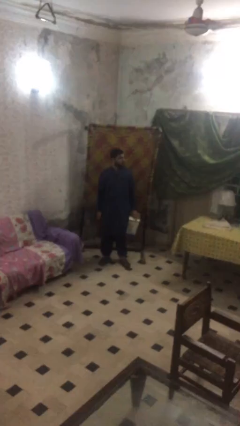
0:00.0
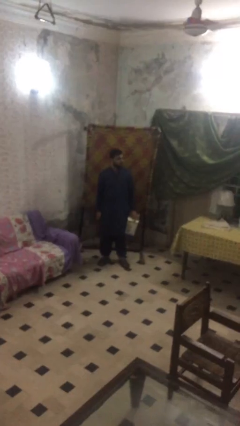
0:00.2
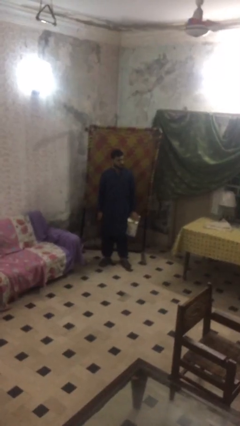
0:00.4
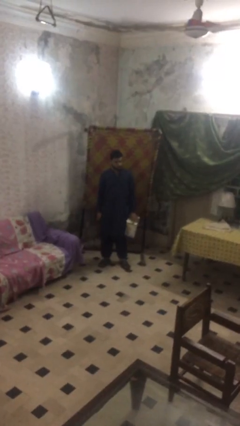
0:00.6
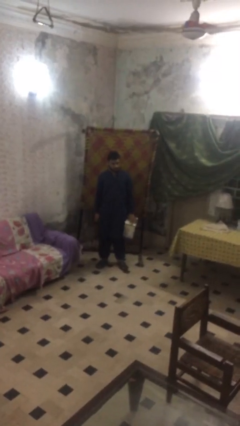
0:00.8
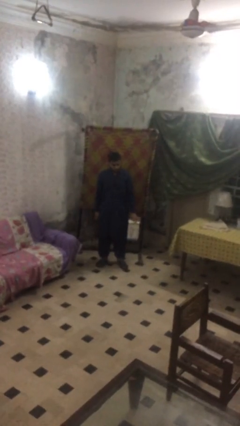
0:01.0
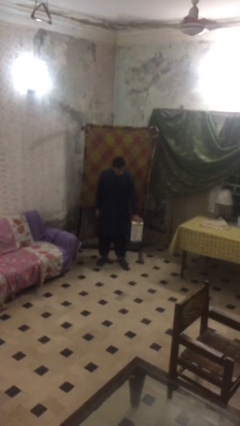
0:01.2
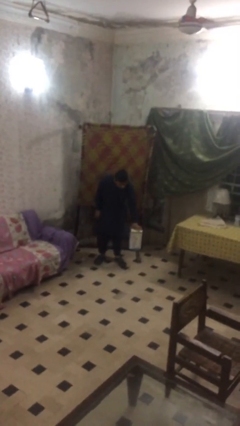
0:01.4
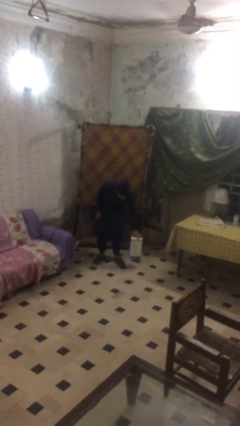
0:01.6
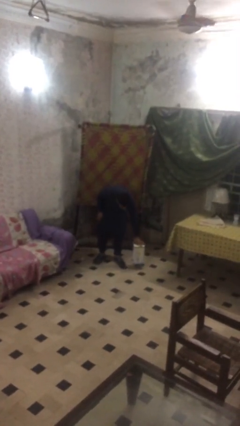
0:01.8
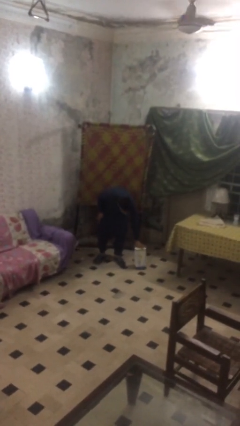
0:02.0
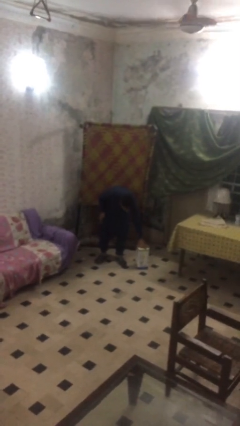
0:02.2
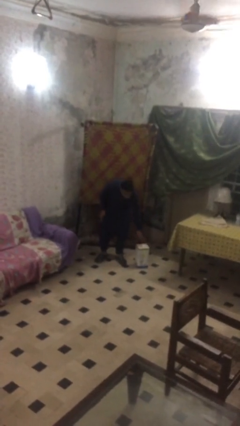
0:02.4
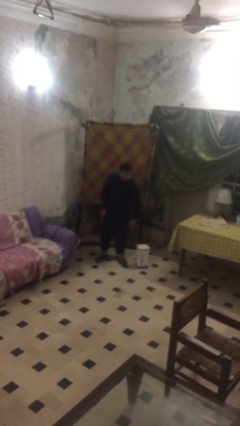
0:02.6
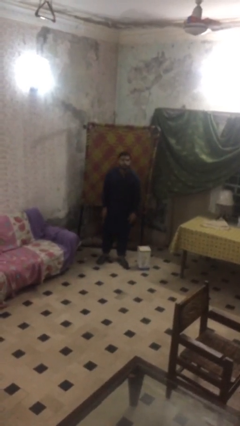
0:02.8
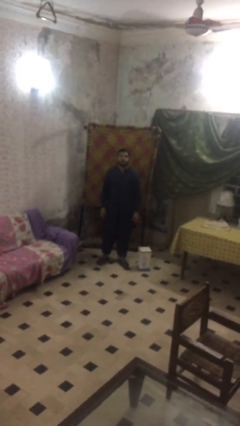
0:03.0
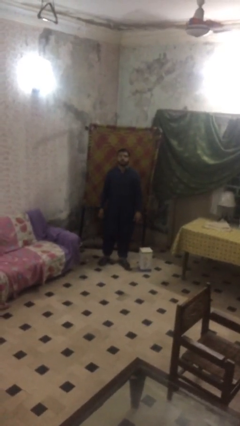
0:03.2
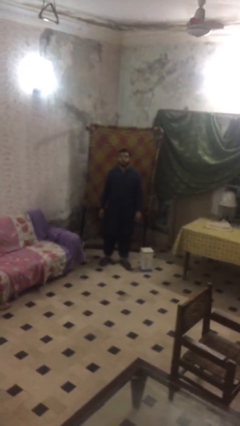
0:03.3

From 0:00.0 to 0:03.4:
person puts down object on floor

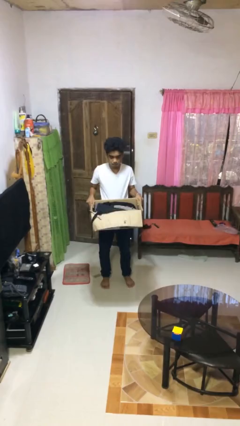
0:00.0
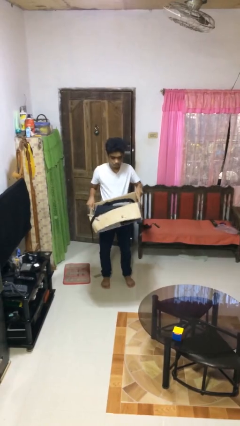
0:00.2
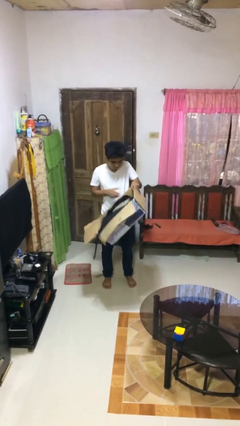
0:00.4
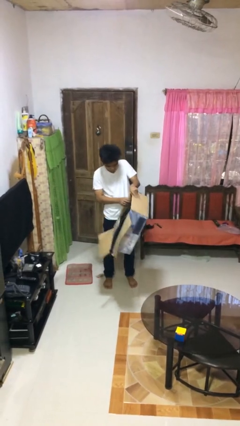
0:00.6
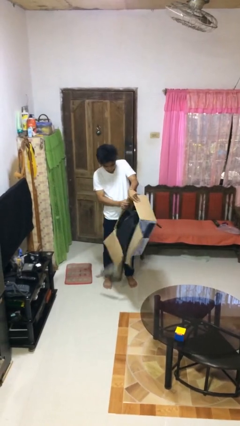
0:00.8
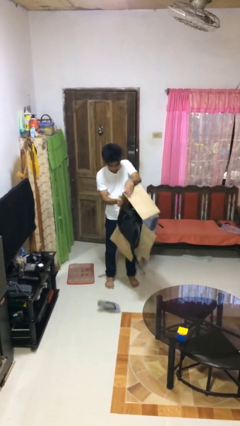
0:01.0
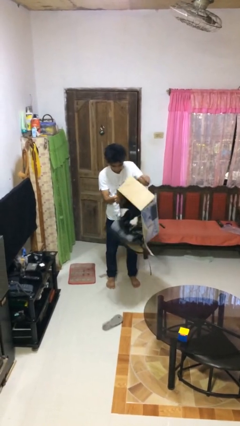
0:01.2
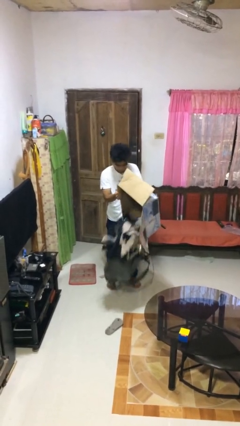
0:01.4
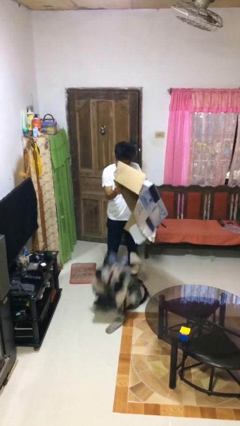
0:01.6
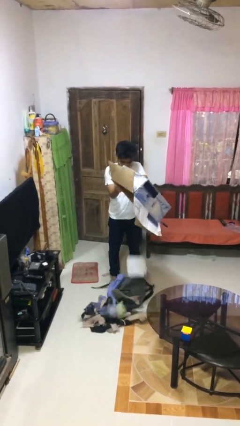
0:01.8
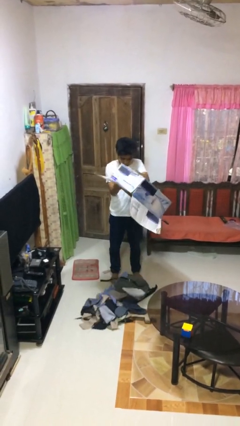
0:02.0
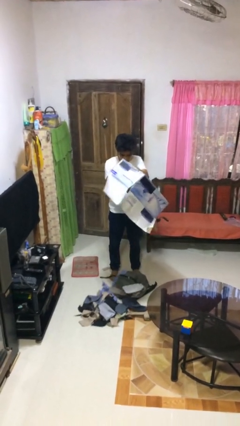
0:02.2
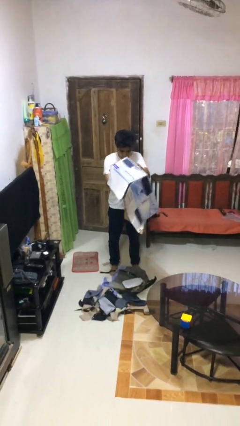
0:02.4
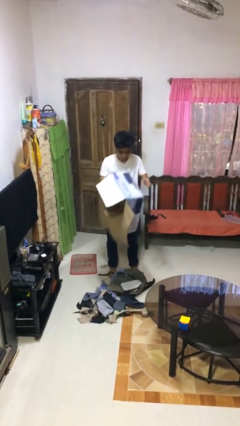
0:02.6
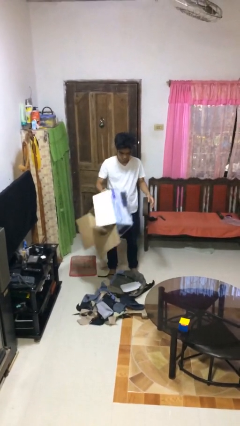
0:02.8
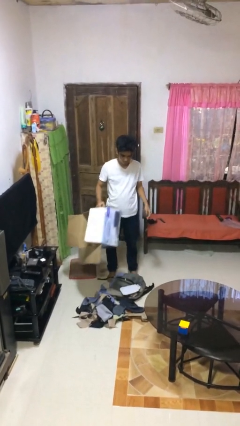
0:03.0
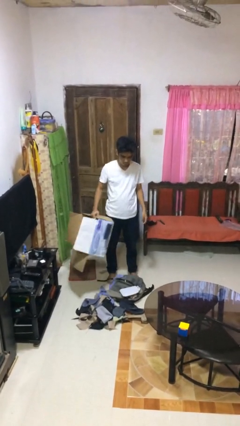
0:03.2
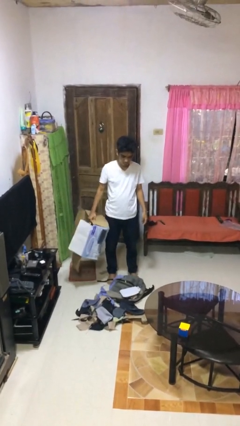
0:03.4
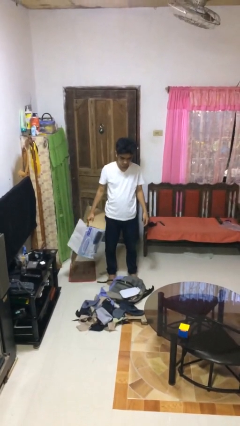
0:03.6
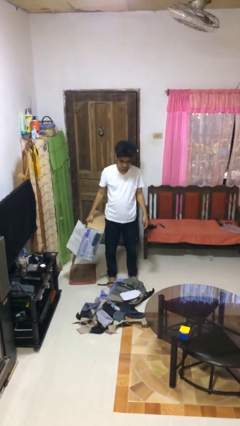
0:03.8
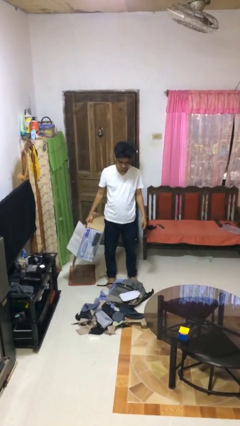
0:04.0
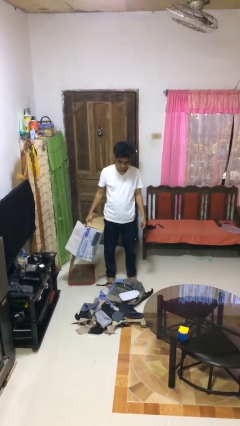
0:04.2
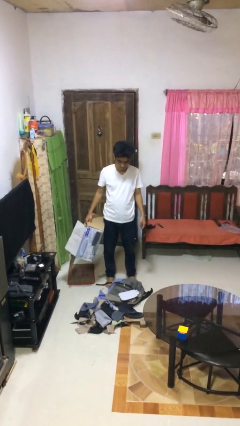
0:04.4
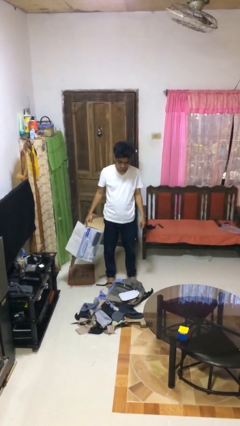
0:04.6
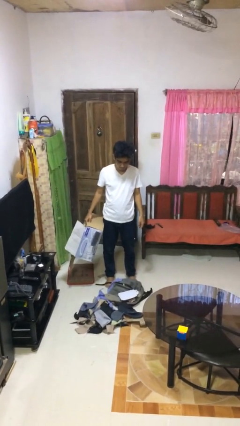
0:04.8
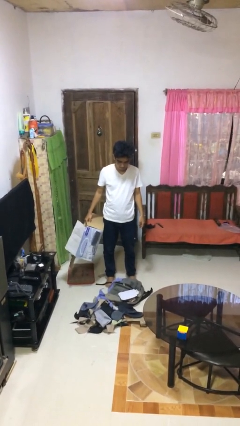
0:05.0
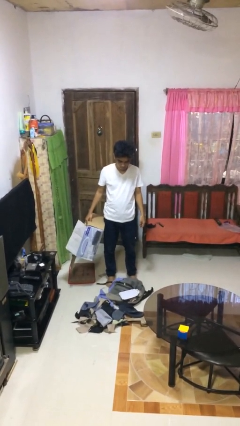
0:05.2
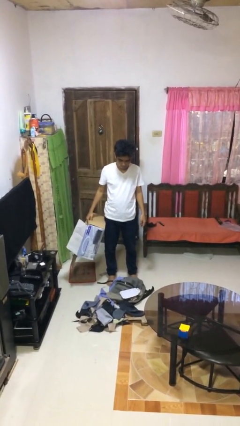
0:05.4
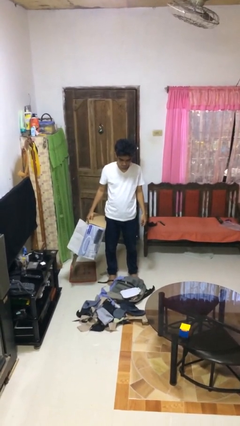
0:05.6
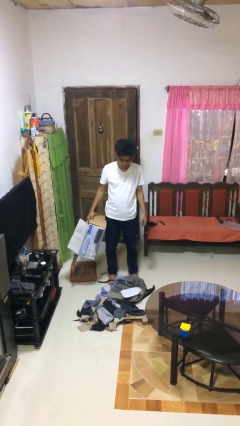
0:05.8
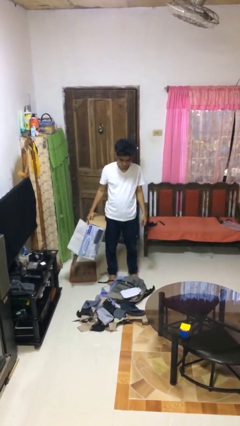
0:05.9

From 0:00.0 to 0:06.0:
person unloads box onto floor

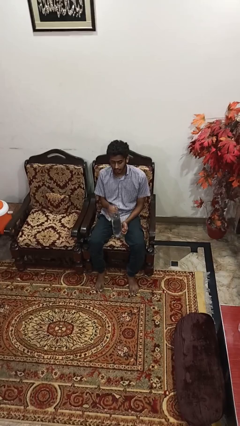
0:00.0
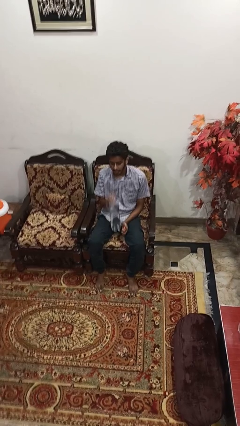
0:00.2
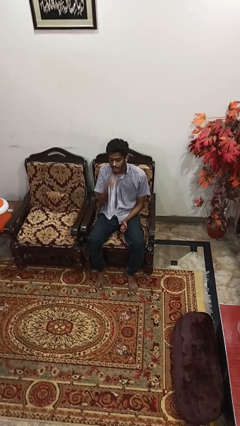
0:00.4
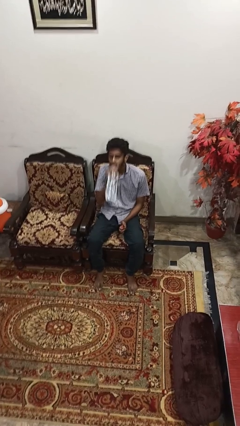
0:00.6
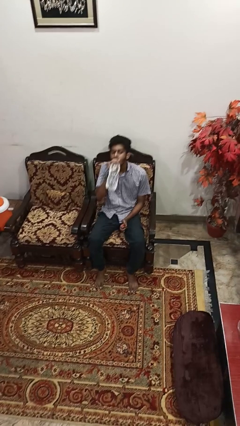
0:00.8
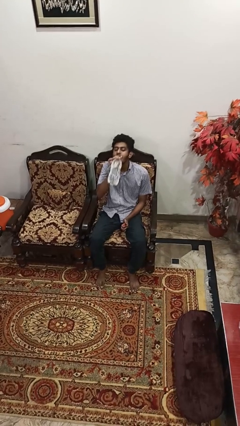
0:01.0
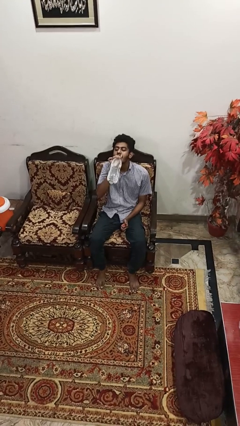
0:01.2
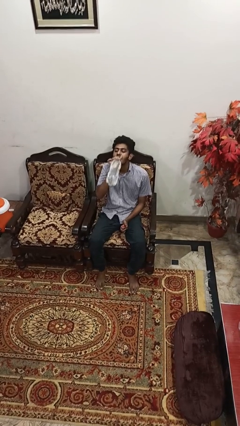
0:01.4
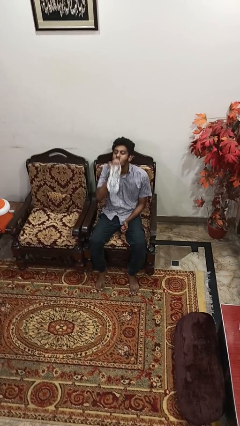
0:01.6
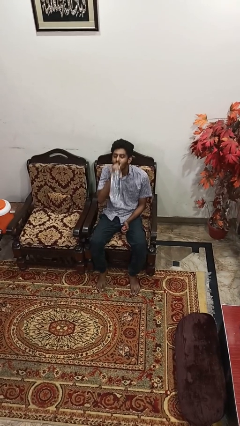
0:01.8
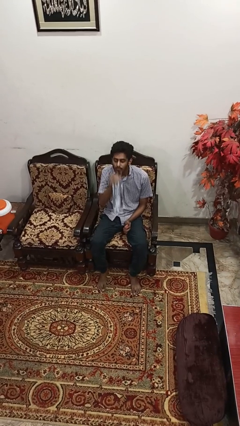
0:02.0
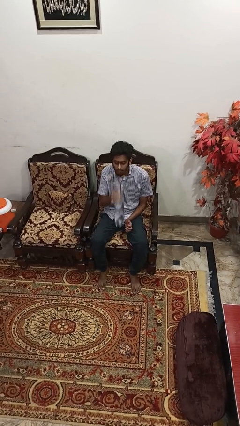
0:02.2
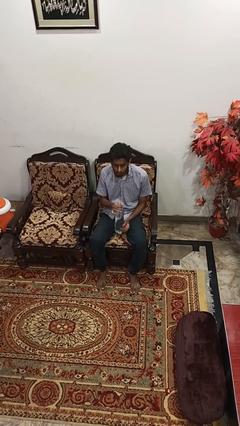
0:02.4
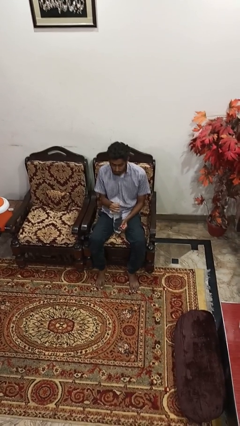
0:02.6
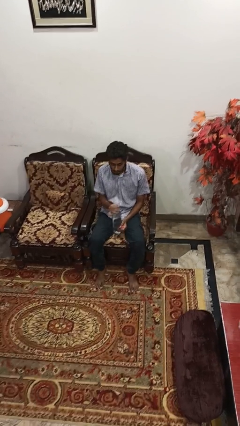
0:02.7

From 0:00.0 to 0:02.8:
person drinks from bottle

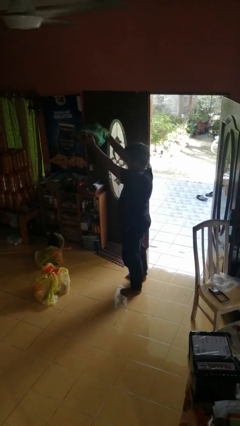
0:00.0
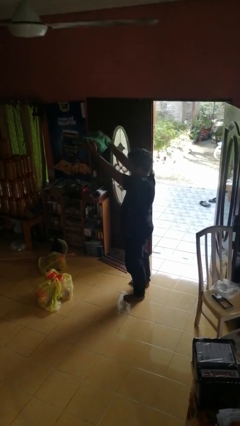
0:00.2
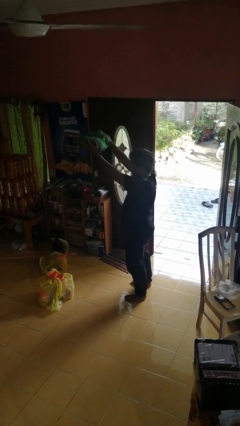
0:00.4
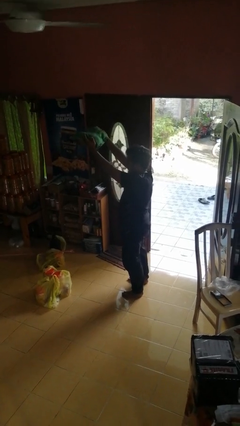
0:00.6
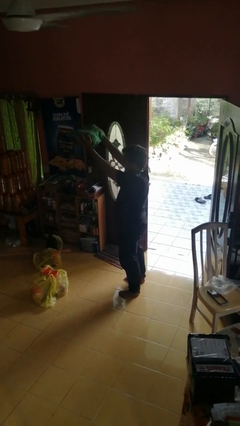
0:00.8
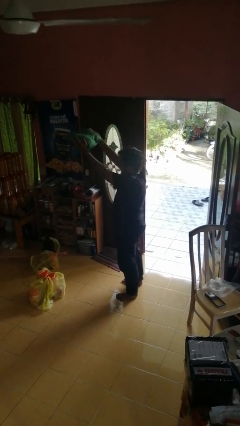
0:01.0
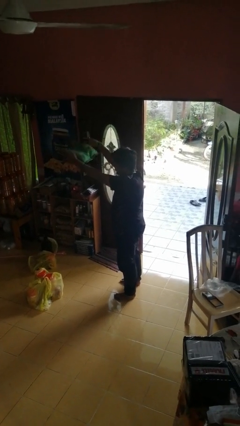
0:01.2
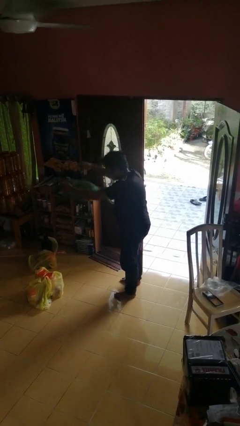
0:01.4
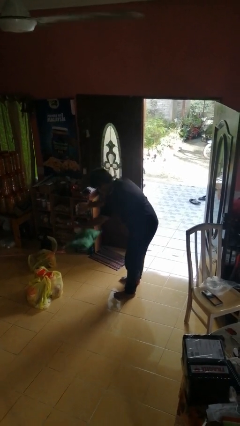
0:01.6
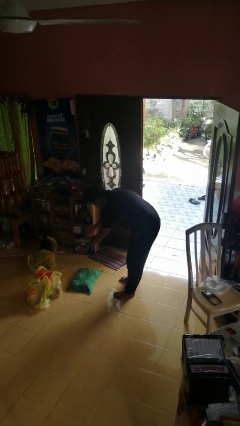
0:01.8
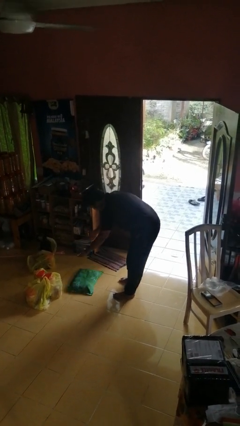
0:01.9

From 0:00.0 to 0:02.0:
person drops object

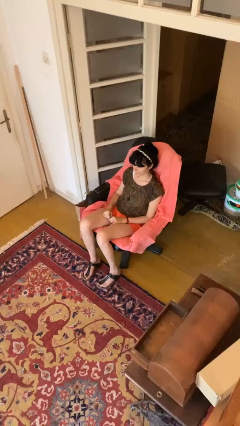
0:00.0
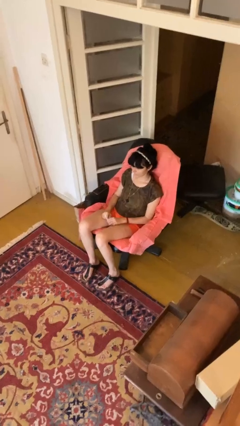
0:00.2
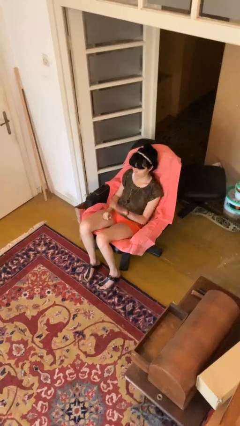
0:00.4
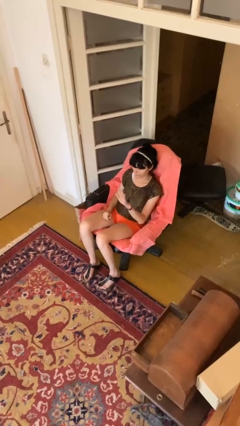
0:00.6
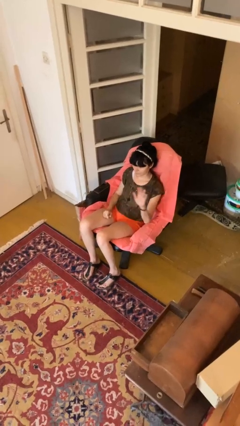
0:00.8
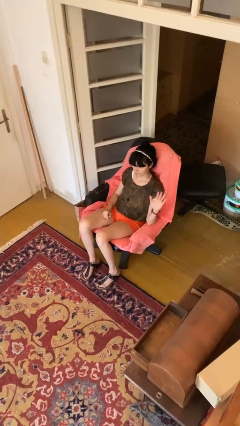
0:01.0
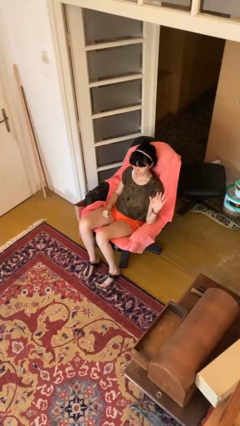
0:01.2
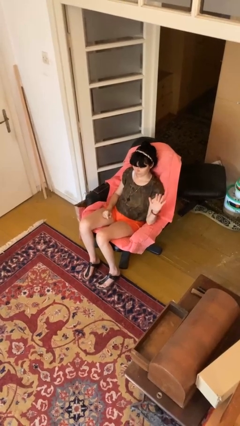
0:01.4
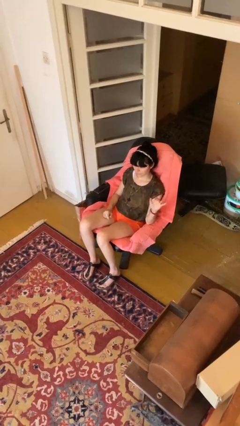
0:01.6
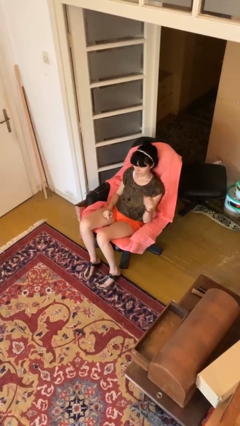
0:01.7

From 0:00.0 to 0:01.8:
person gestures swipe left

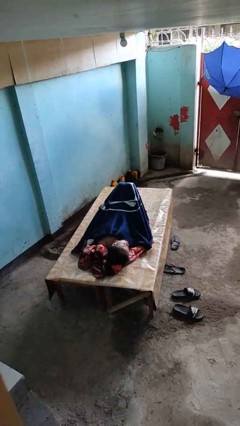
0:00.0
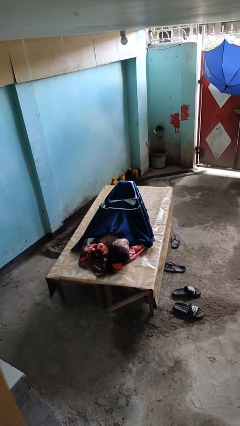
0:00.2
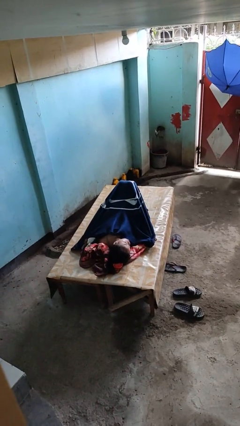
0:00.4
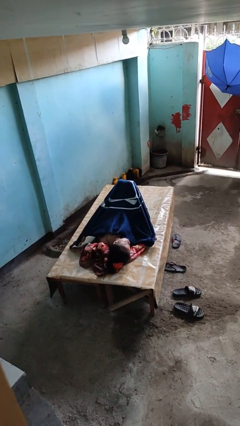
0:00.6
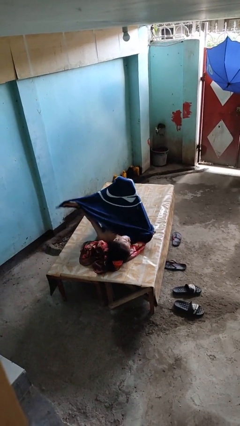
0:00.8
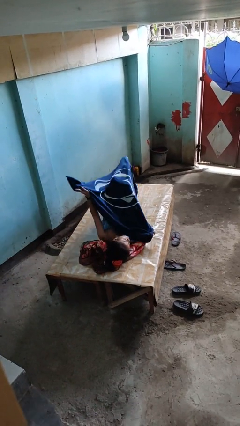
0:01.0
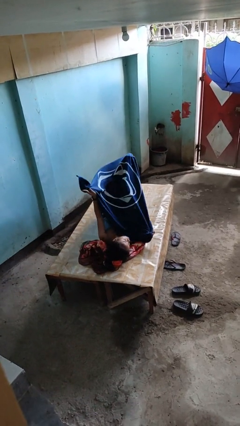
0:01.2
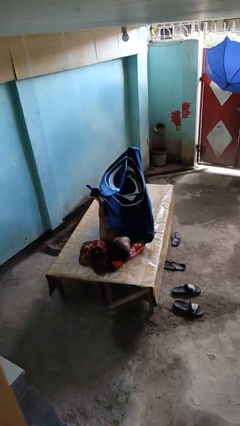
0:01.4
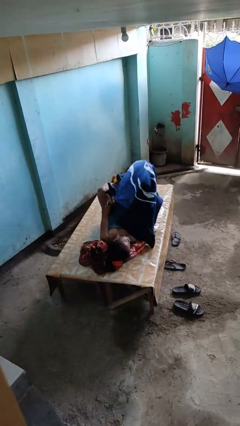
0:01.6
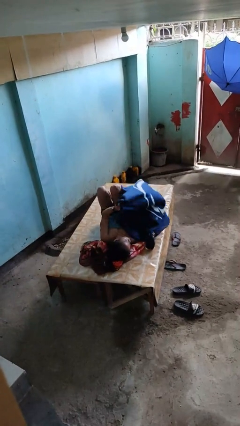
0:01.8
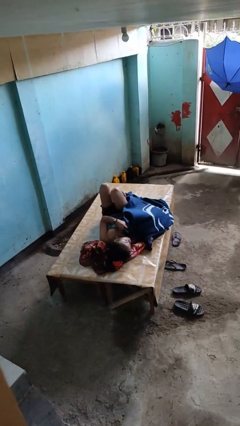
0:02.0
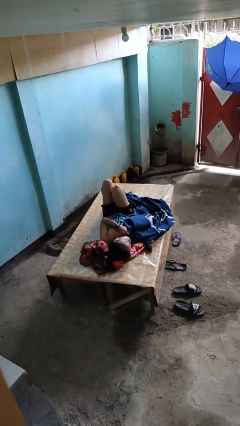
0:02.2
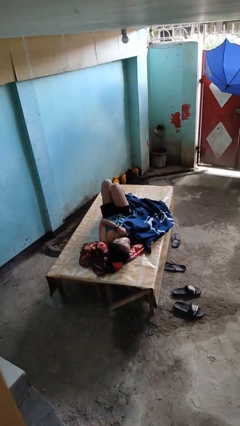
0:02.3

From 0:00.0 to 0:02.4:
person uncovers with bedsheets
